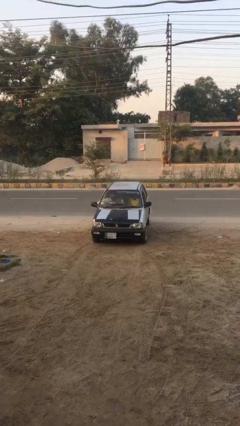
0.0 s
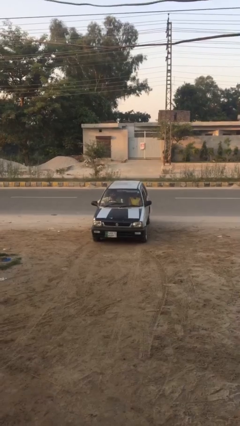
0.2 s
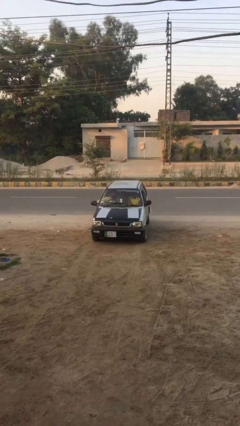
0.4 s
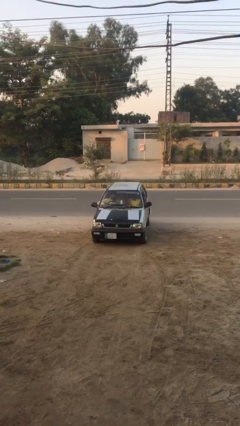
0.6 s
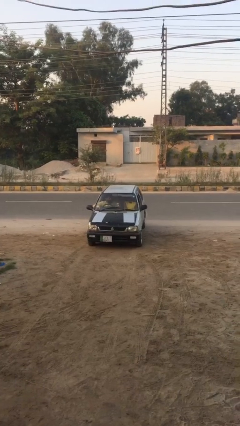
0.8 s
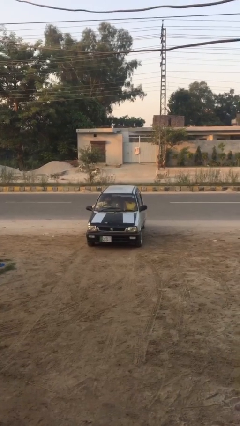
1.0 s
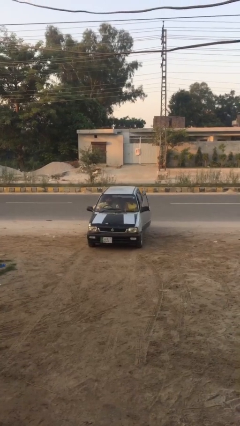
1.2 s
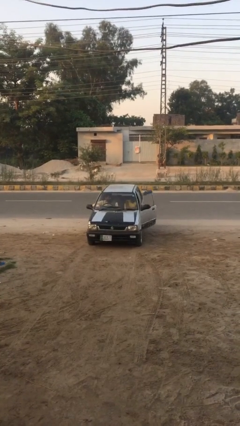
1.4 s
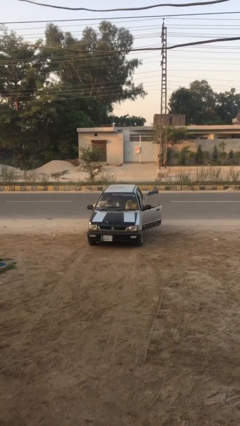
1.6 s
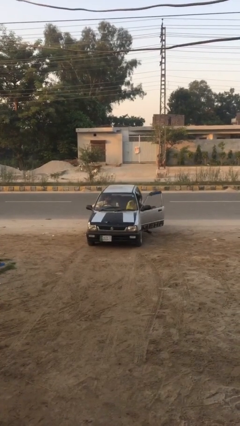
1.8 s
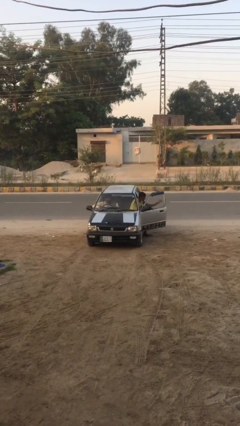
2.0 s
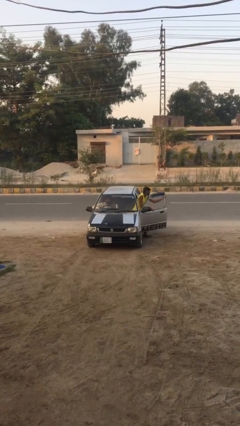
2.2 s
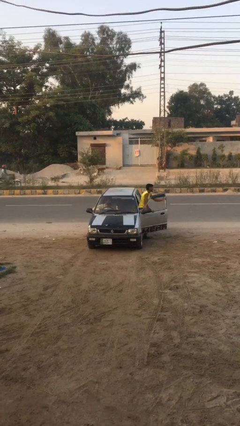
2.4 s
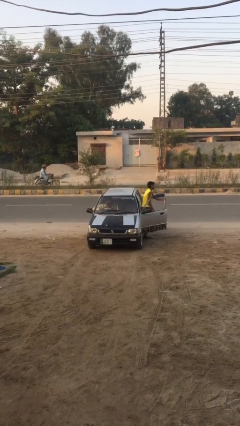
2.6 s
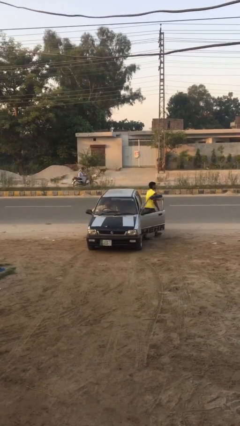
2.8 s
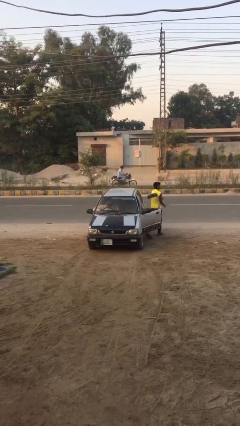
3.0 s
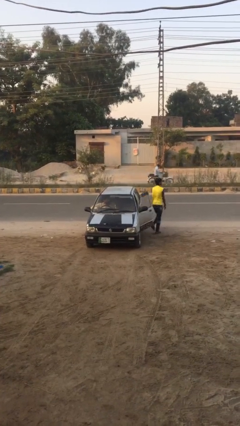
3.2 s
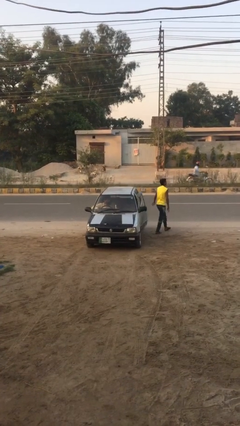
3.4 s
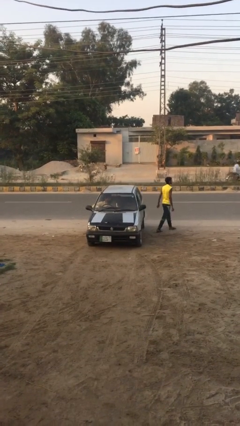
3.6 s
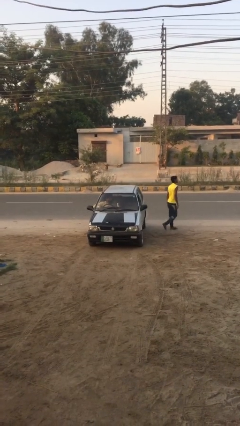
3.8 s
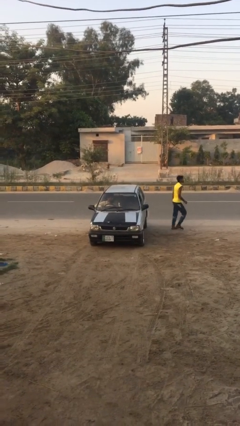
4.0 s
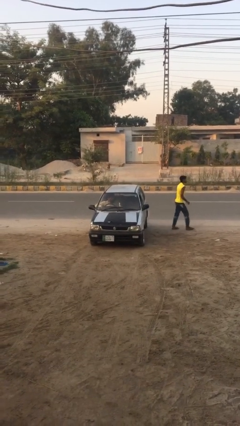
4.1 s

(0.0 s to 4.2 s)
car drops off person

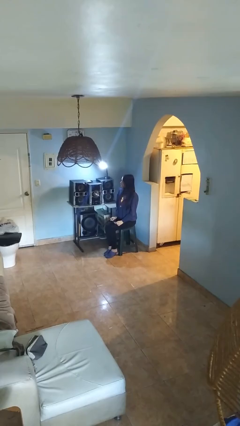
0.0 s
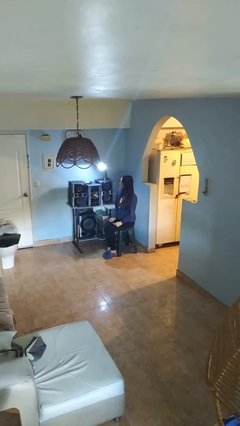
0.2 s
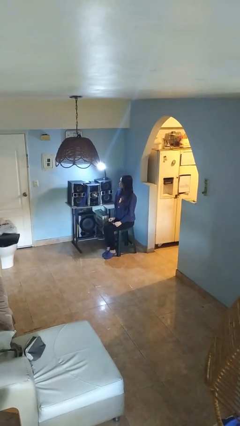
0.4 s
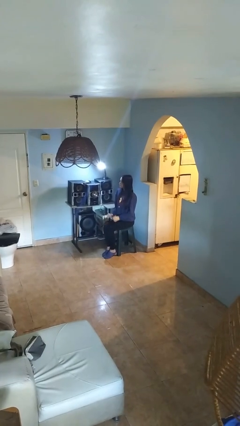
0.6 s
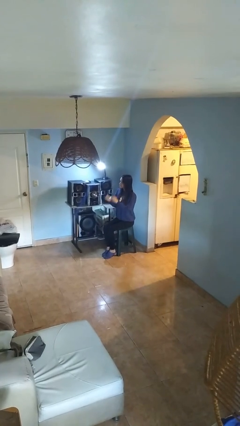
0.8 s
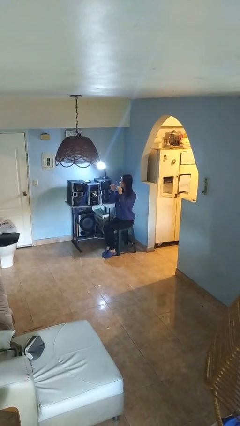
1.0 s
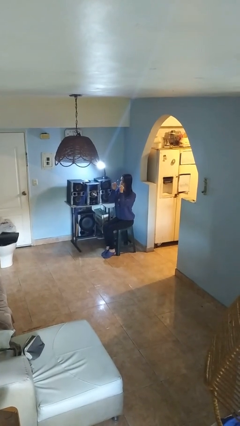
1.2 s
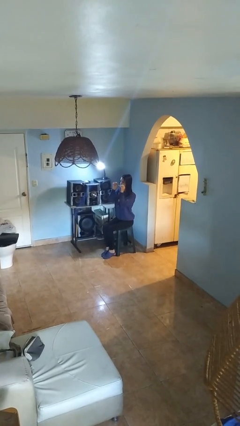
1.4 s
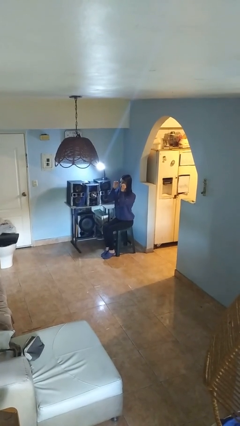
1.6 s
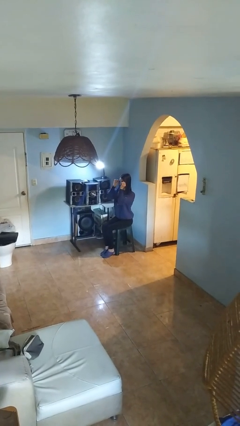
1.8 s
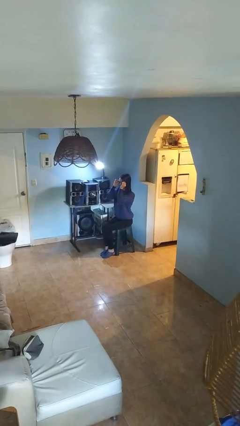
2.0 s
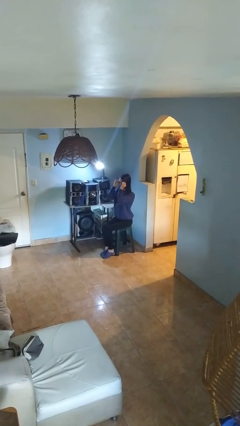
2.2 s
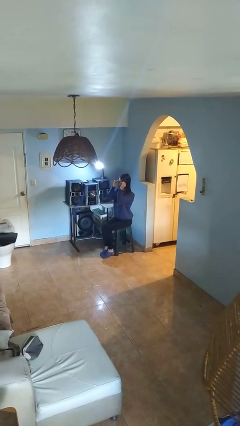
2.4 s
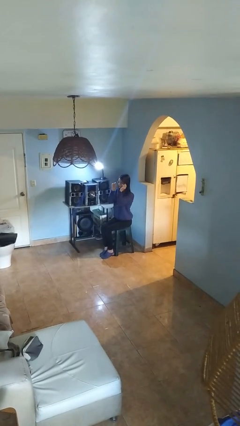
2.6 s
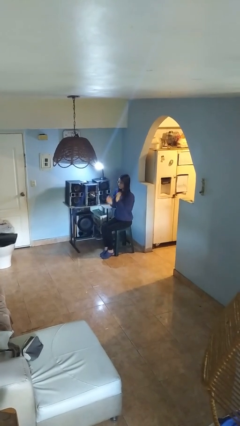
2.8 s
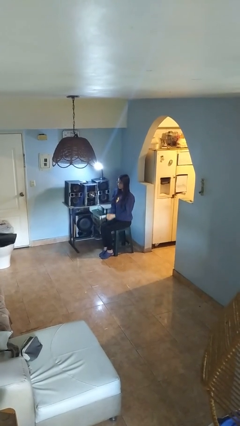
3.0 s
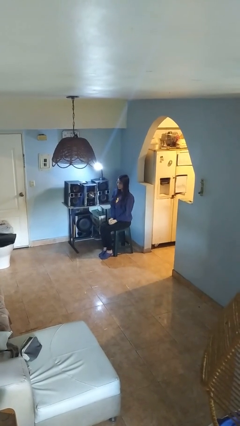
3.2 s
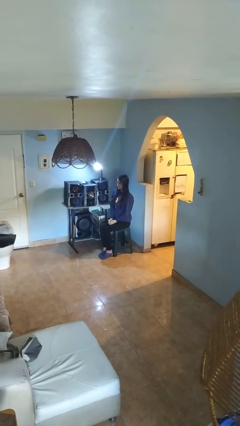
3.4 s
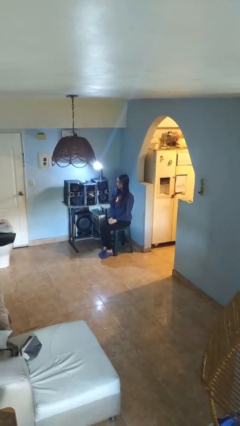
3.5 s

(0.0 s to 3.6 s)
person puts on glasses

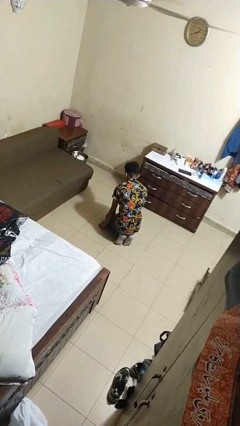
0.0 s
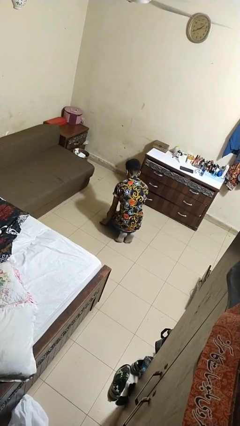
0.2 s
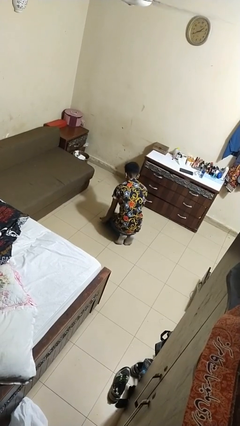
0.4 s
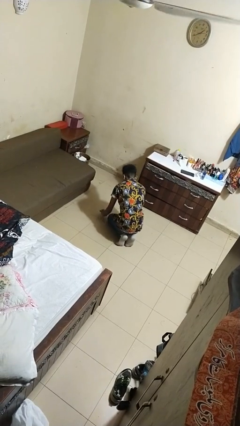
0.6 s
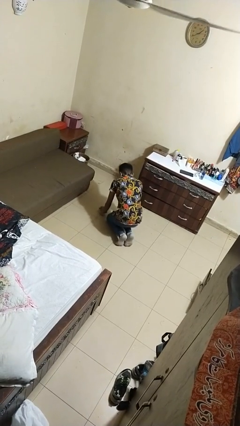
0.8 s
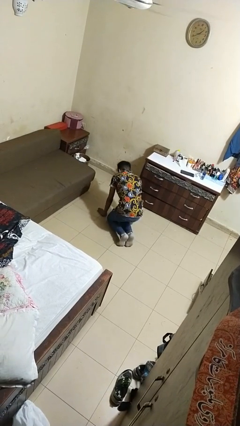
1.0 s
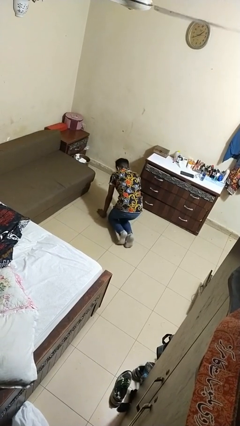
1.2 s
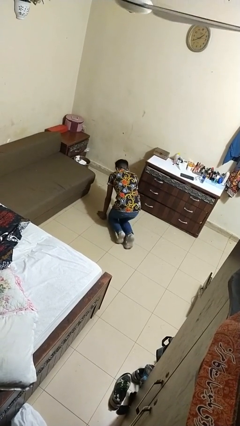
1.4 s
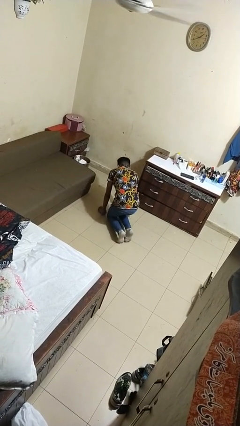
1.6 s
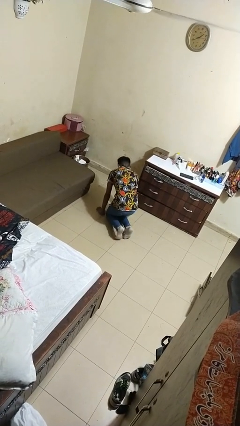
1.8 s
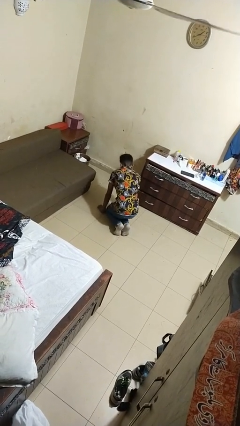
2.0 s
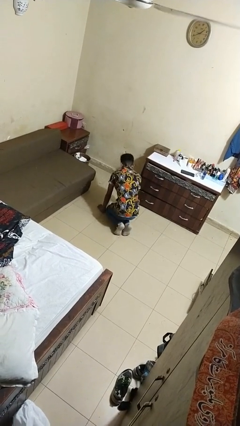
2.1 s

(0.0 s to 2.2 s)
person crawls

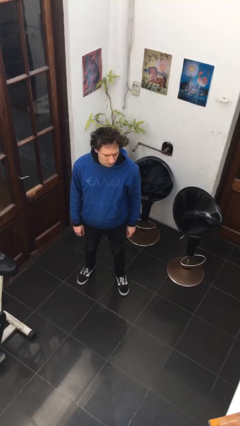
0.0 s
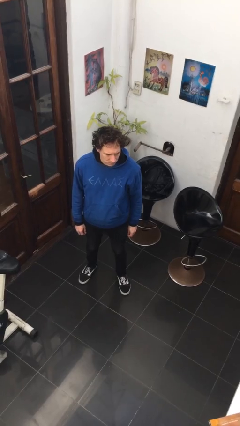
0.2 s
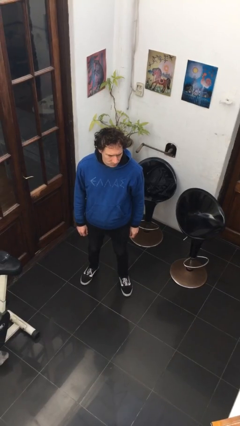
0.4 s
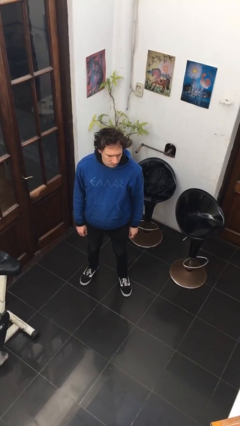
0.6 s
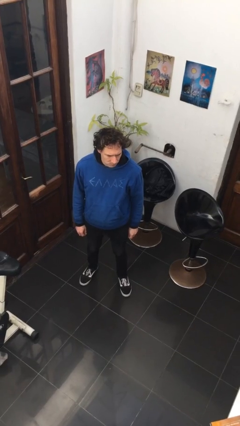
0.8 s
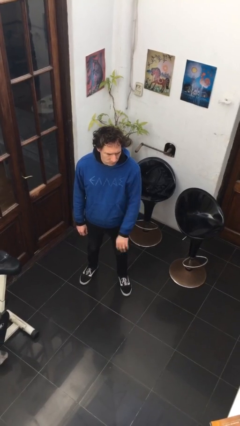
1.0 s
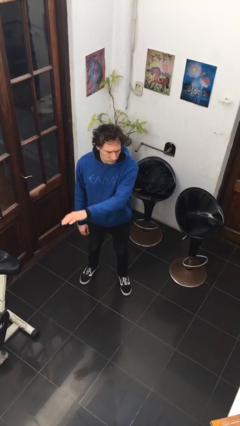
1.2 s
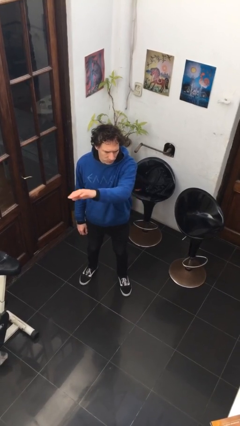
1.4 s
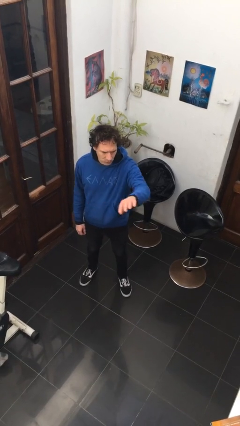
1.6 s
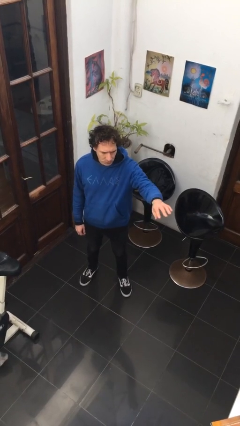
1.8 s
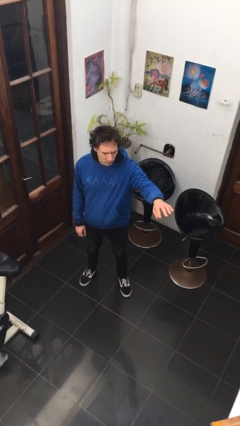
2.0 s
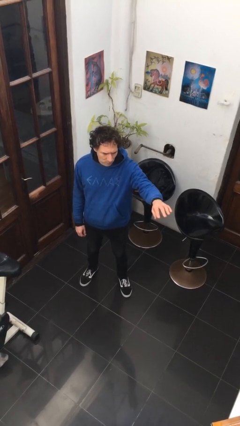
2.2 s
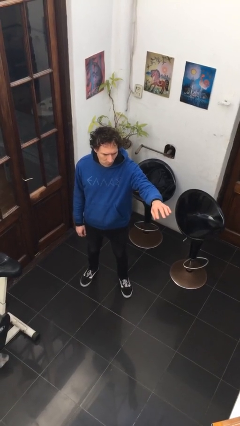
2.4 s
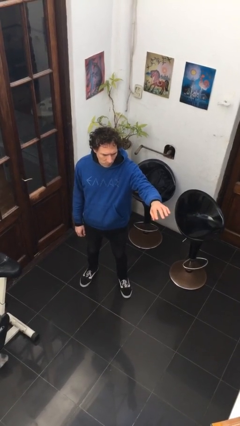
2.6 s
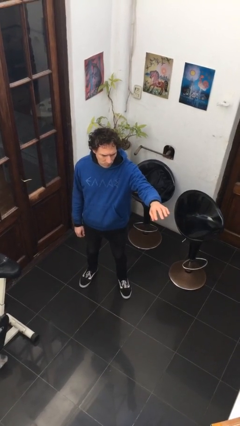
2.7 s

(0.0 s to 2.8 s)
person gestures swipe left

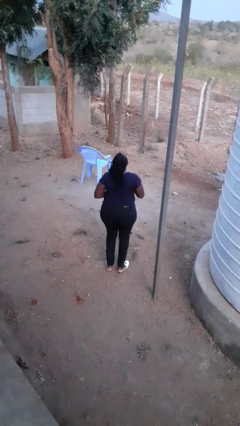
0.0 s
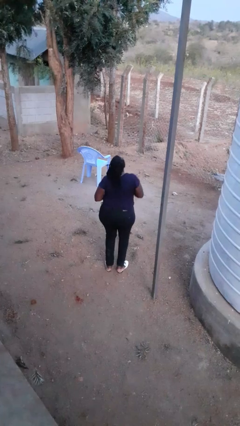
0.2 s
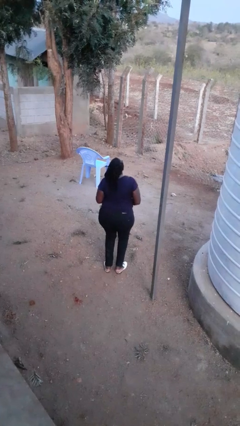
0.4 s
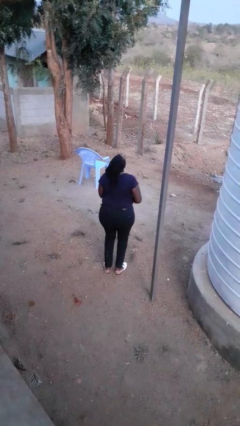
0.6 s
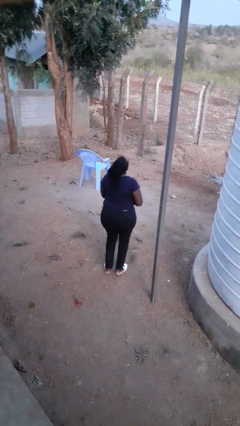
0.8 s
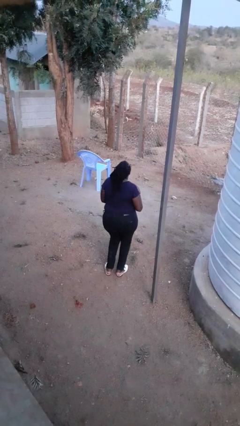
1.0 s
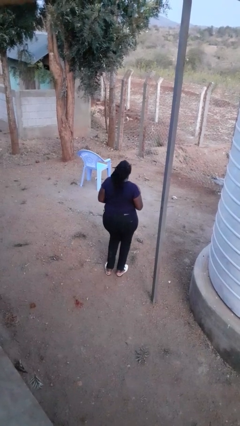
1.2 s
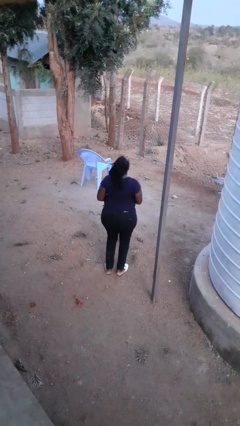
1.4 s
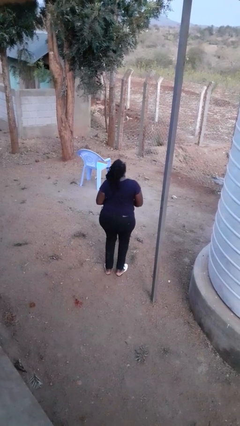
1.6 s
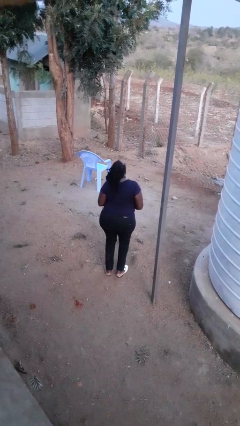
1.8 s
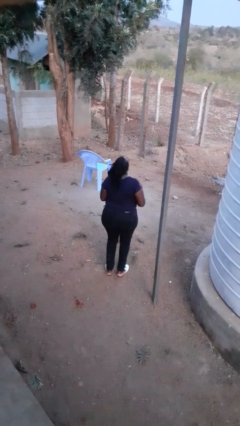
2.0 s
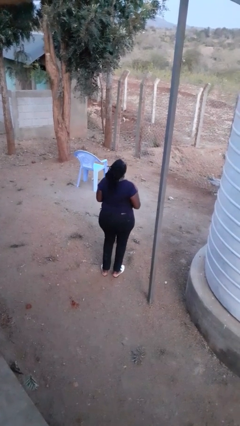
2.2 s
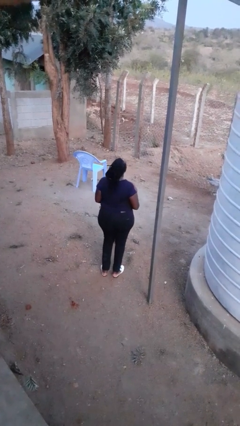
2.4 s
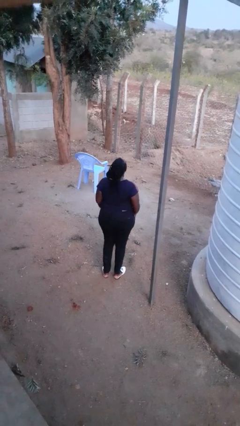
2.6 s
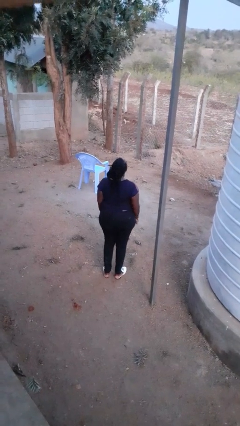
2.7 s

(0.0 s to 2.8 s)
person dances in place

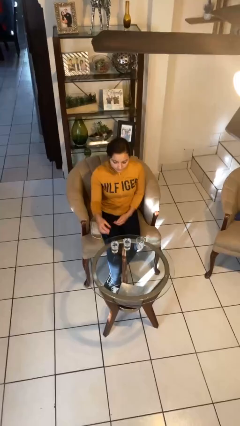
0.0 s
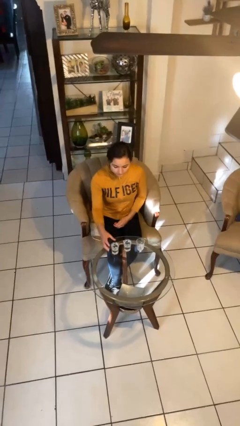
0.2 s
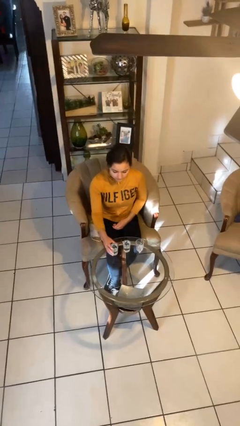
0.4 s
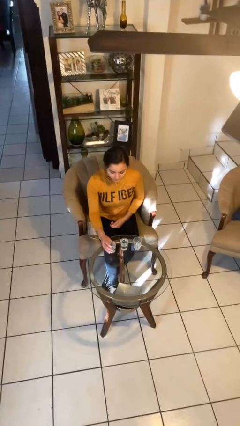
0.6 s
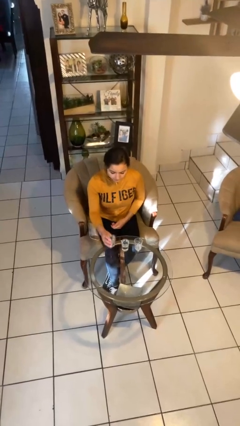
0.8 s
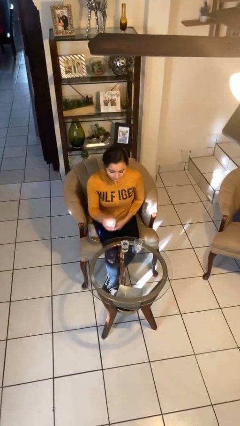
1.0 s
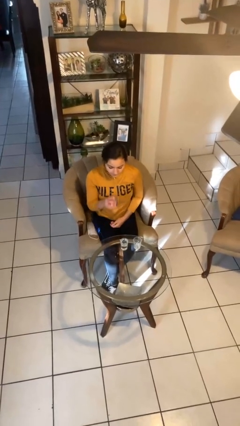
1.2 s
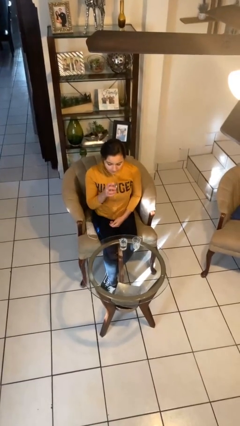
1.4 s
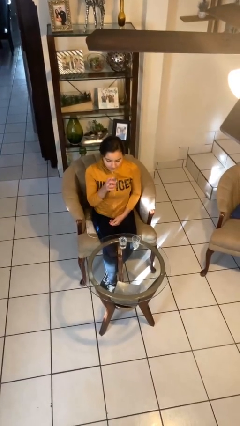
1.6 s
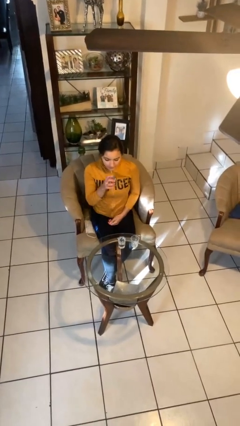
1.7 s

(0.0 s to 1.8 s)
person picks up object from table

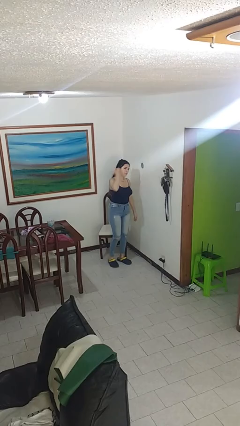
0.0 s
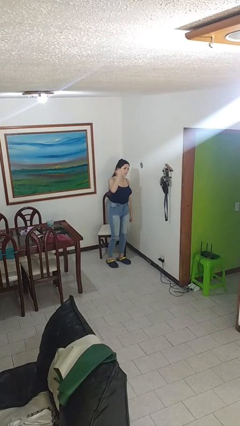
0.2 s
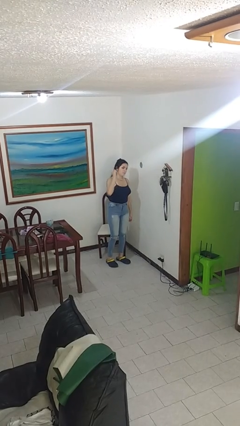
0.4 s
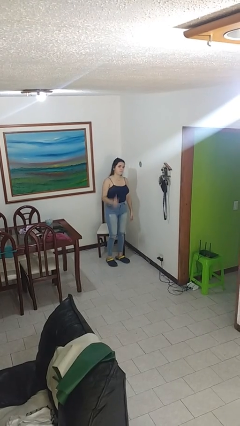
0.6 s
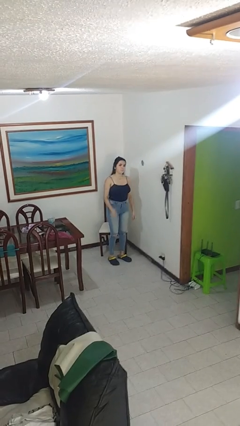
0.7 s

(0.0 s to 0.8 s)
person gestures behind me
